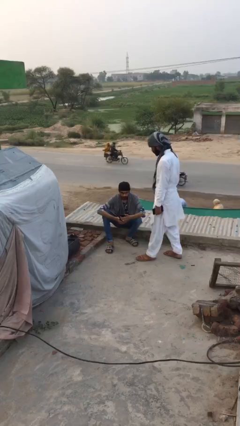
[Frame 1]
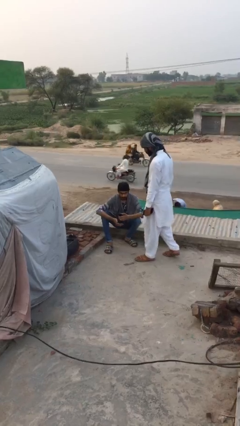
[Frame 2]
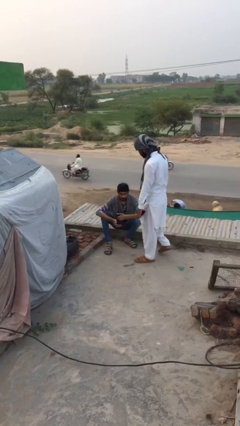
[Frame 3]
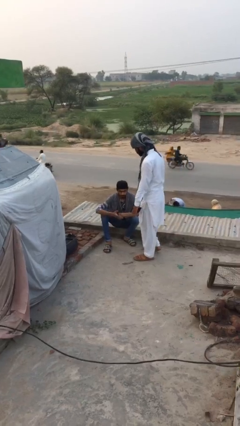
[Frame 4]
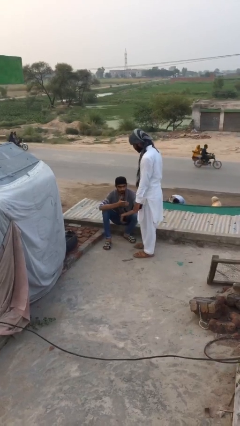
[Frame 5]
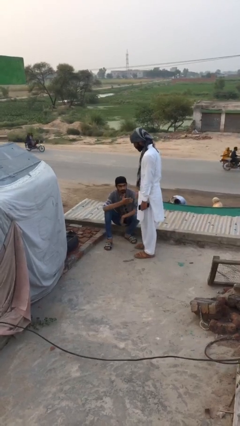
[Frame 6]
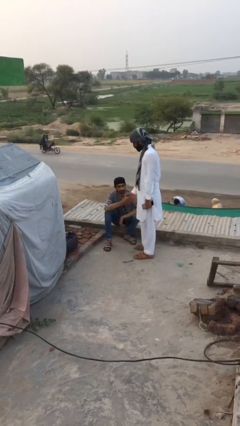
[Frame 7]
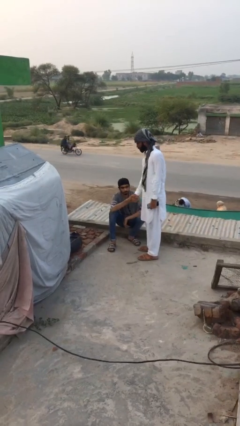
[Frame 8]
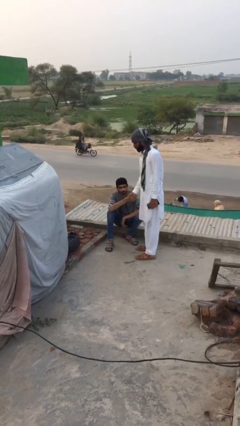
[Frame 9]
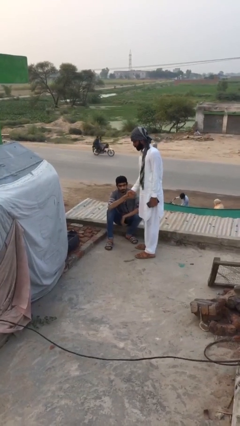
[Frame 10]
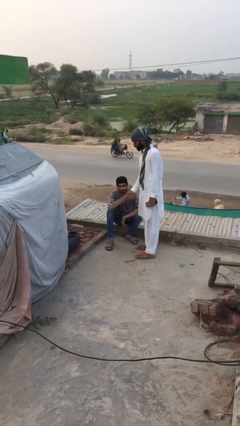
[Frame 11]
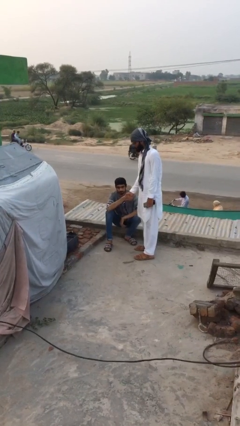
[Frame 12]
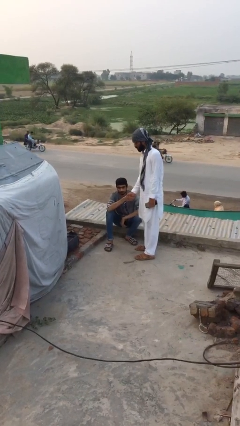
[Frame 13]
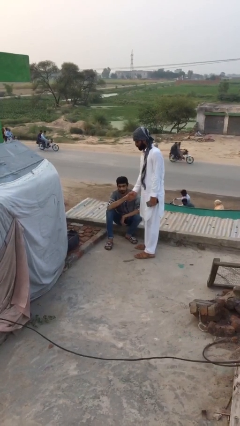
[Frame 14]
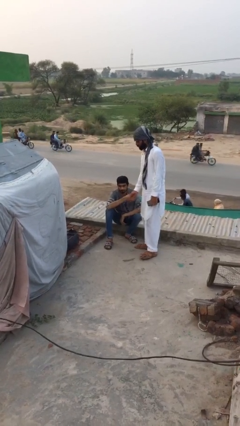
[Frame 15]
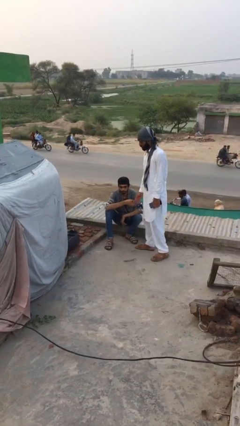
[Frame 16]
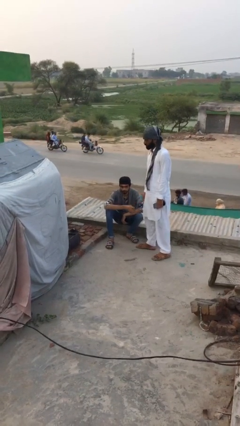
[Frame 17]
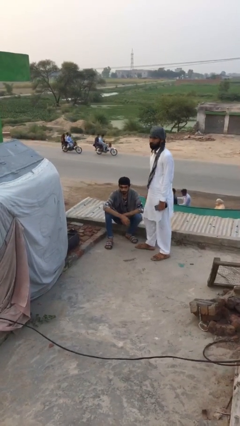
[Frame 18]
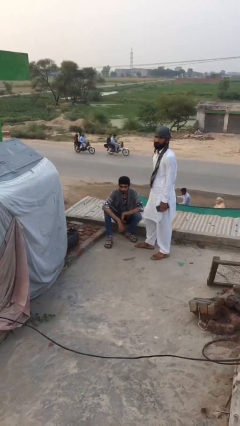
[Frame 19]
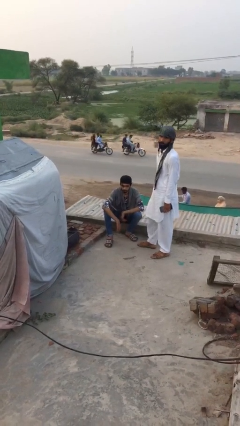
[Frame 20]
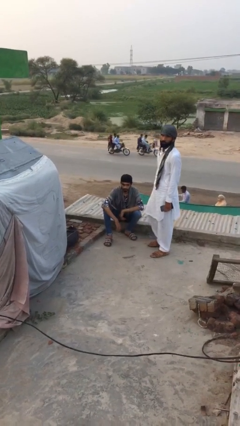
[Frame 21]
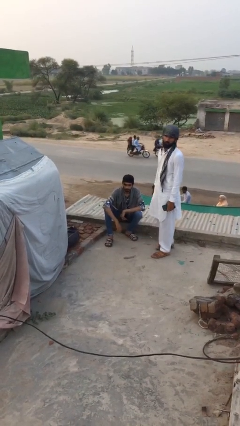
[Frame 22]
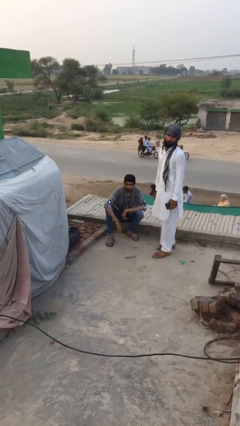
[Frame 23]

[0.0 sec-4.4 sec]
person shakes hand

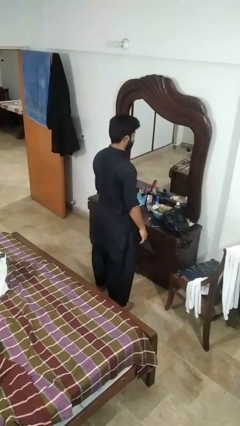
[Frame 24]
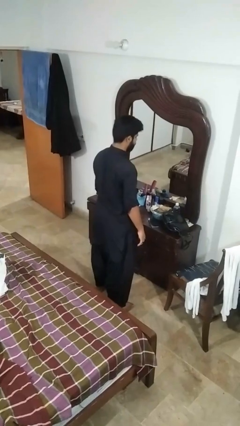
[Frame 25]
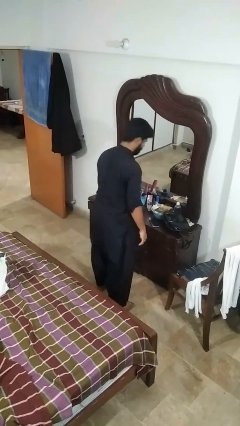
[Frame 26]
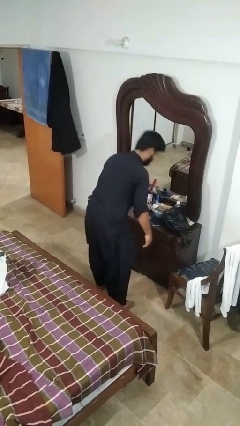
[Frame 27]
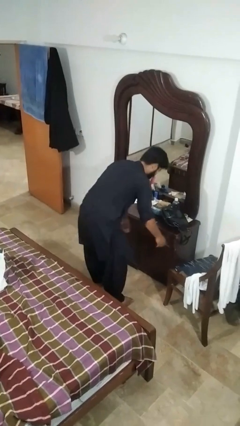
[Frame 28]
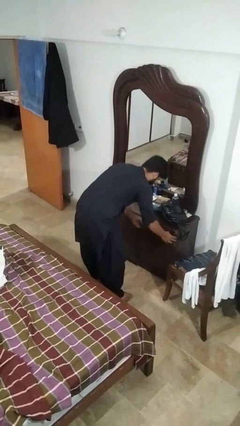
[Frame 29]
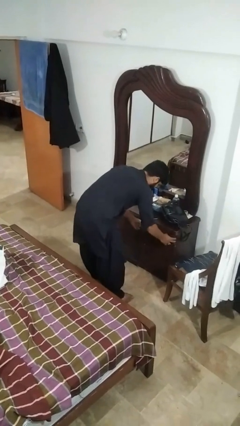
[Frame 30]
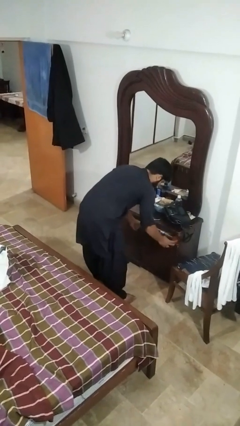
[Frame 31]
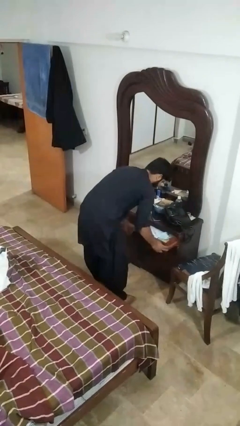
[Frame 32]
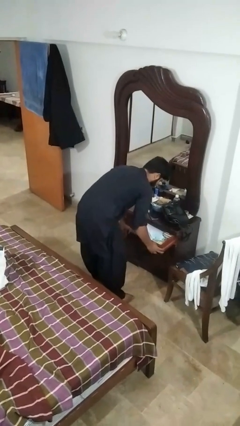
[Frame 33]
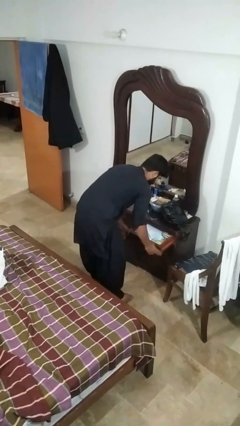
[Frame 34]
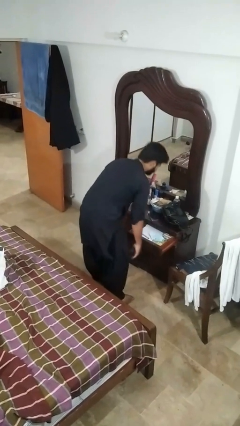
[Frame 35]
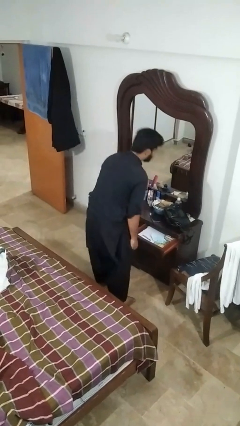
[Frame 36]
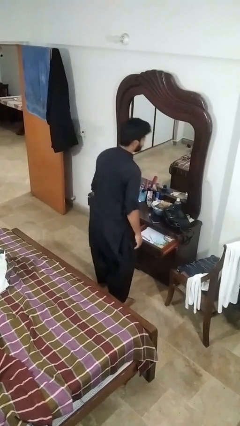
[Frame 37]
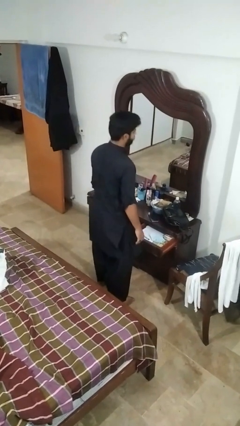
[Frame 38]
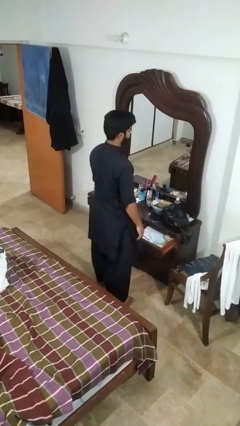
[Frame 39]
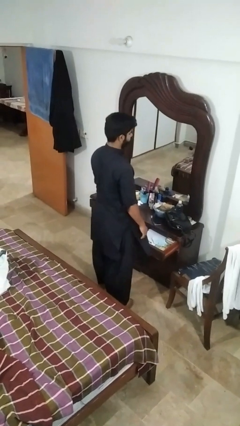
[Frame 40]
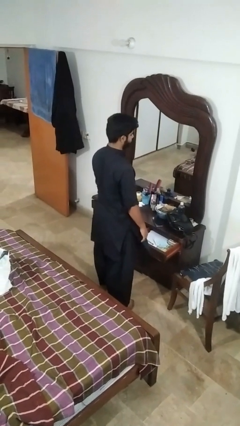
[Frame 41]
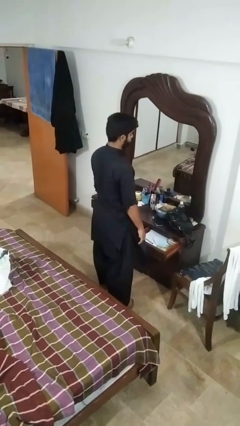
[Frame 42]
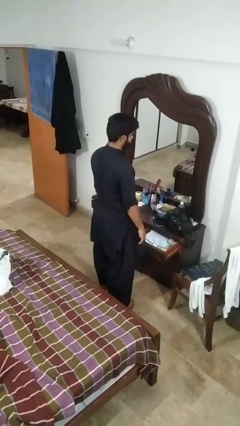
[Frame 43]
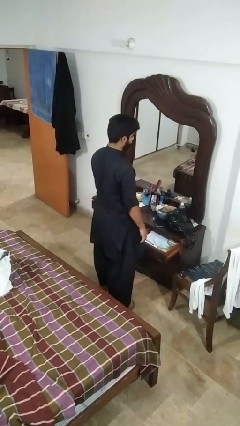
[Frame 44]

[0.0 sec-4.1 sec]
person opens dresser drawer

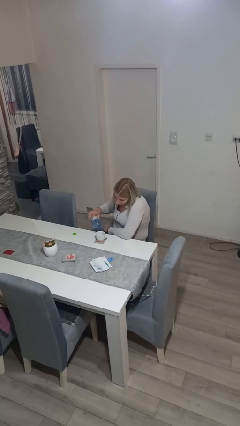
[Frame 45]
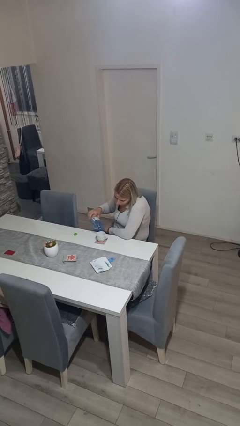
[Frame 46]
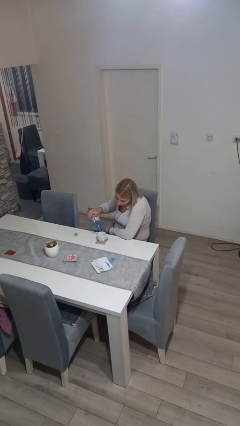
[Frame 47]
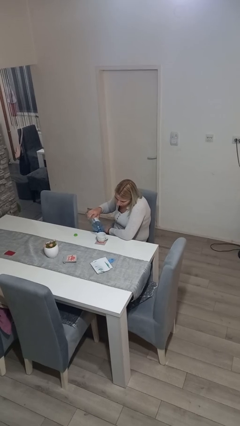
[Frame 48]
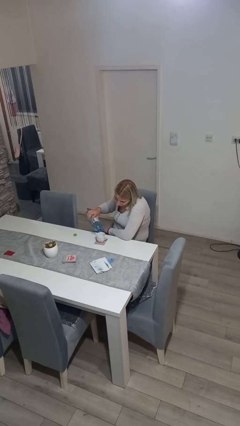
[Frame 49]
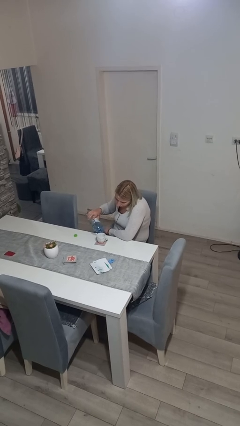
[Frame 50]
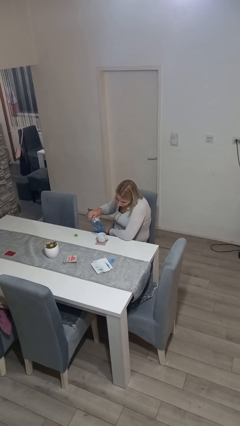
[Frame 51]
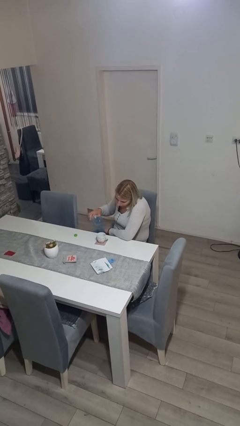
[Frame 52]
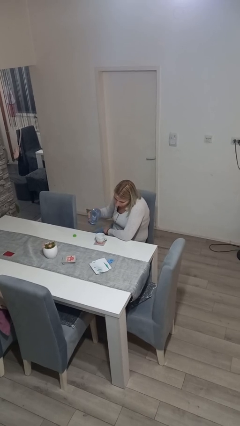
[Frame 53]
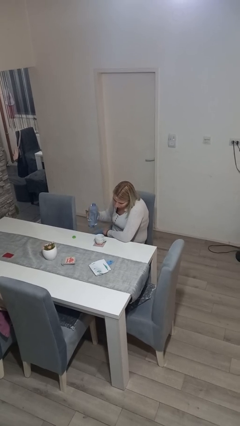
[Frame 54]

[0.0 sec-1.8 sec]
person pours liquid into cup

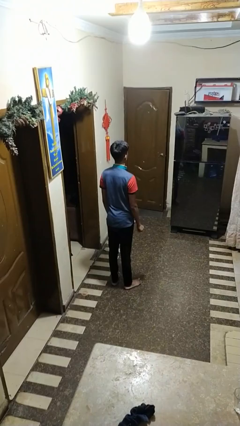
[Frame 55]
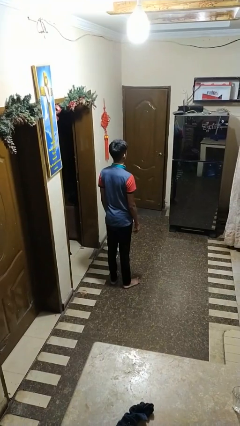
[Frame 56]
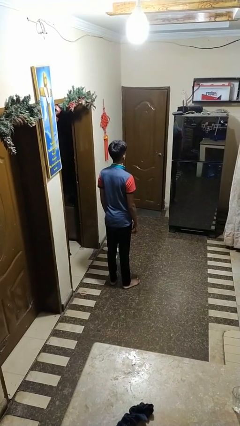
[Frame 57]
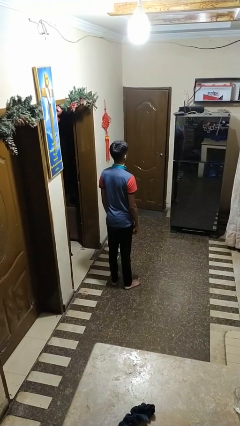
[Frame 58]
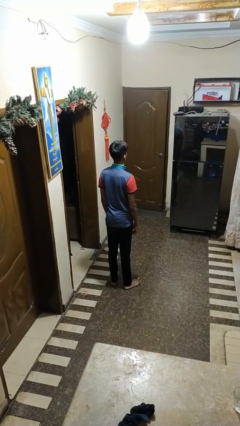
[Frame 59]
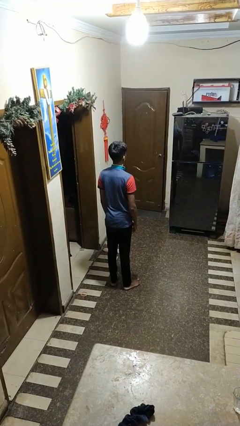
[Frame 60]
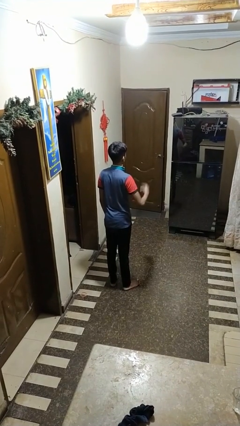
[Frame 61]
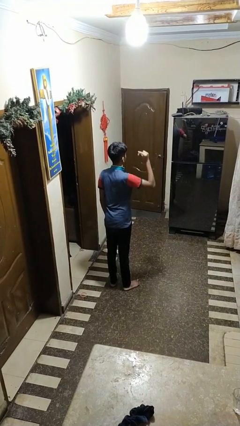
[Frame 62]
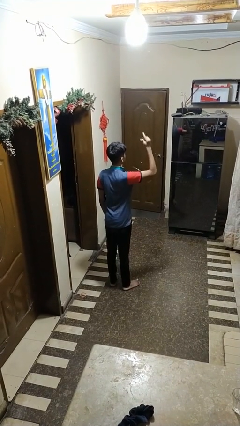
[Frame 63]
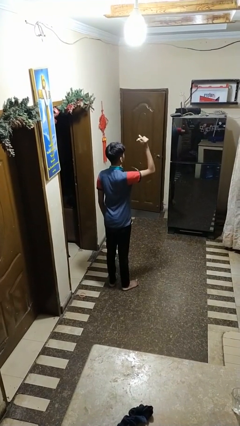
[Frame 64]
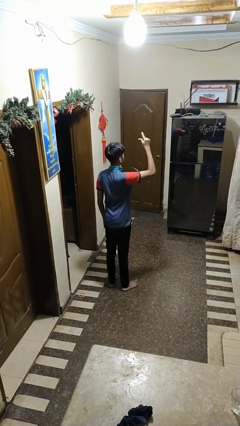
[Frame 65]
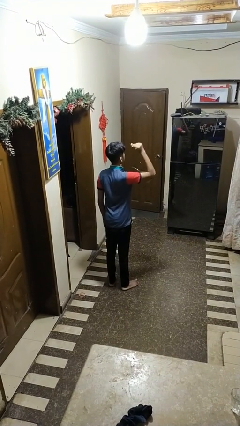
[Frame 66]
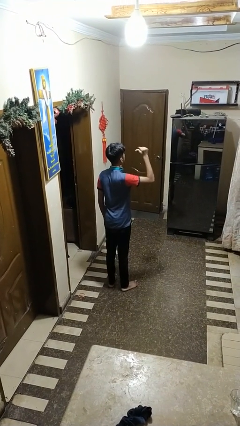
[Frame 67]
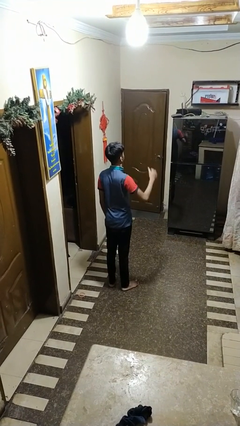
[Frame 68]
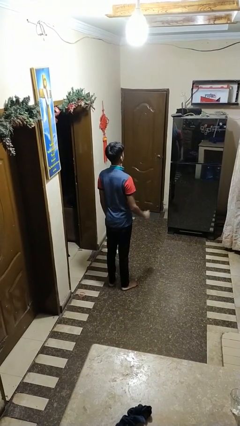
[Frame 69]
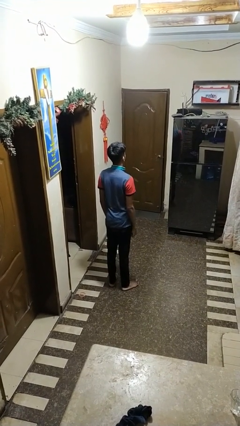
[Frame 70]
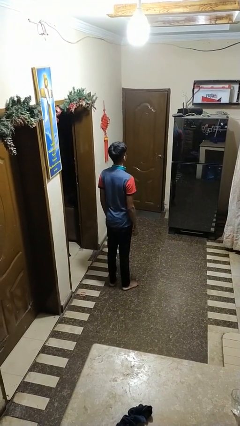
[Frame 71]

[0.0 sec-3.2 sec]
person snaps fingers

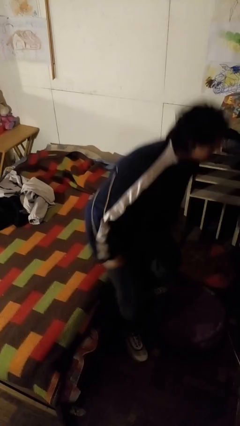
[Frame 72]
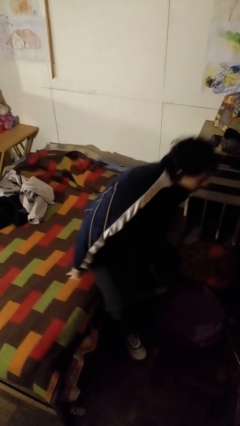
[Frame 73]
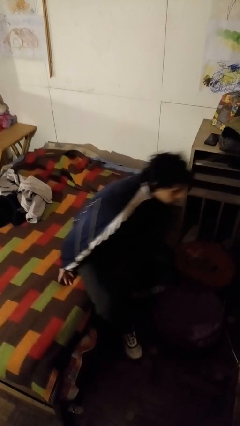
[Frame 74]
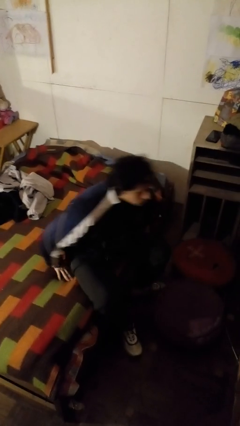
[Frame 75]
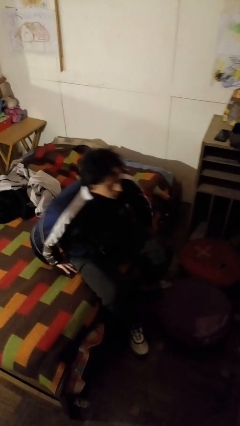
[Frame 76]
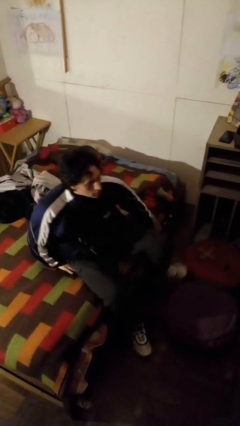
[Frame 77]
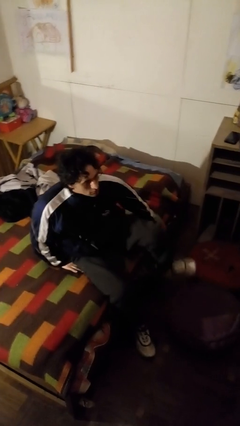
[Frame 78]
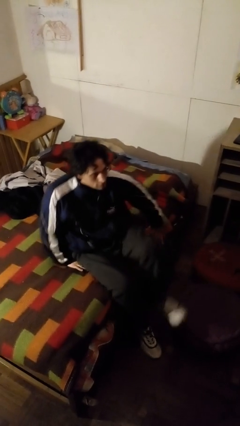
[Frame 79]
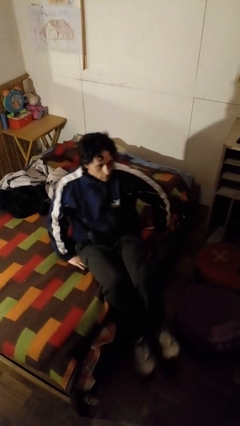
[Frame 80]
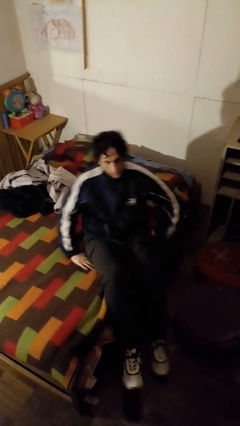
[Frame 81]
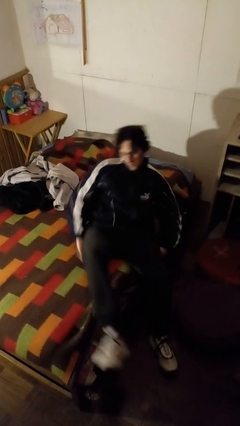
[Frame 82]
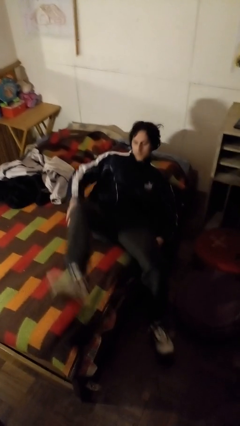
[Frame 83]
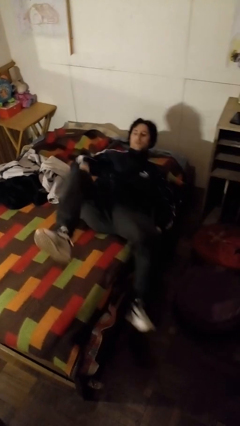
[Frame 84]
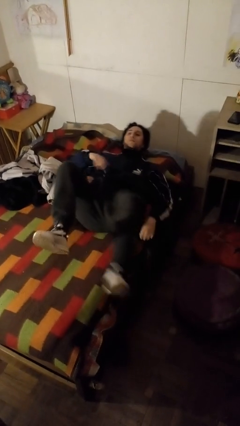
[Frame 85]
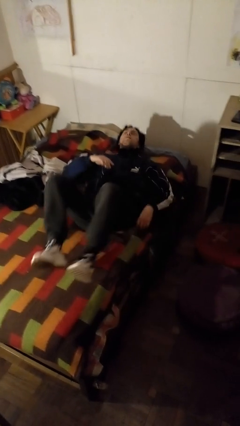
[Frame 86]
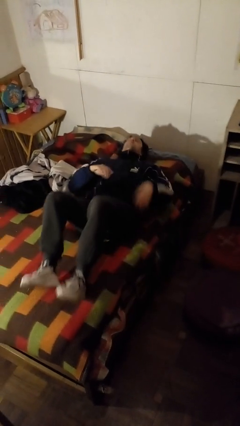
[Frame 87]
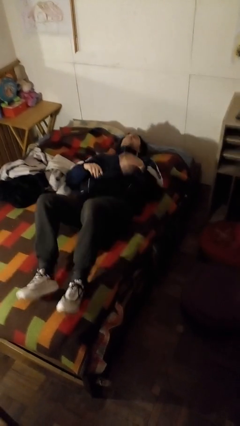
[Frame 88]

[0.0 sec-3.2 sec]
person lies down on bed

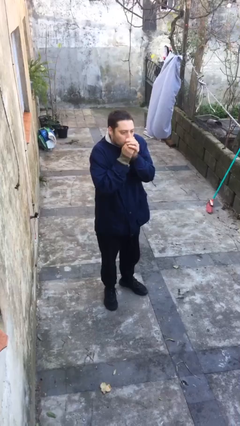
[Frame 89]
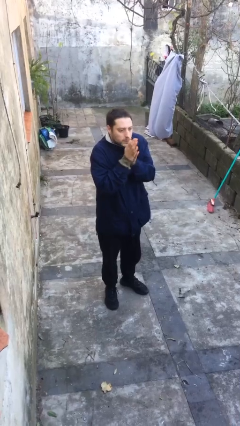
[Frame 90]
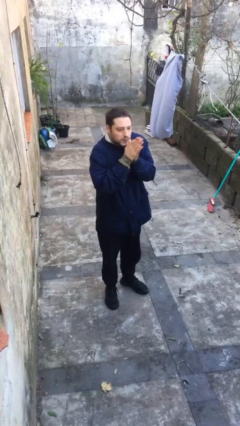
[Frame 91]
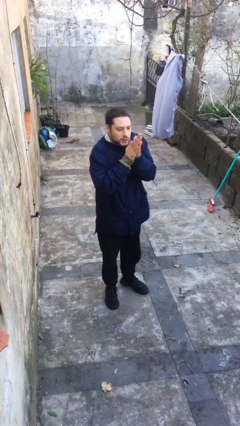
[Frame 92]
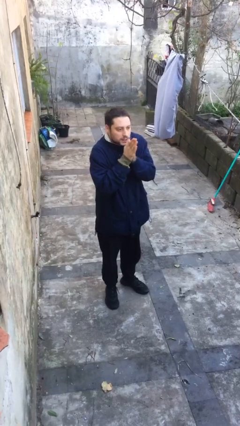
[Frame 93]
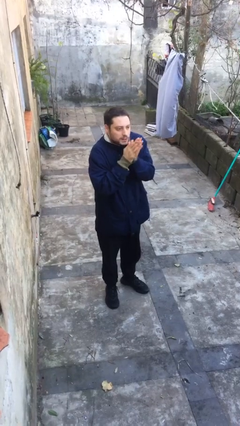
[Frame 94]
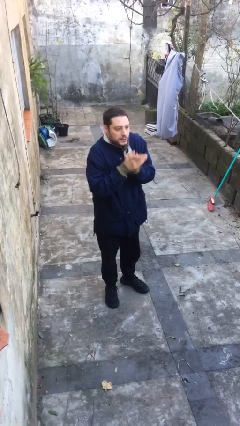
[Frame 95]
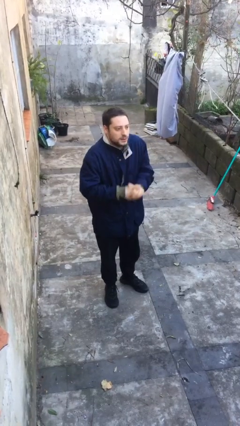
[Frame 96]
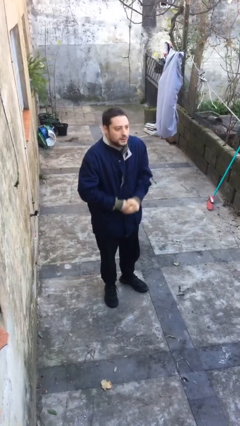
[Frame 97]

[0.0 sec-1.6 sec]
person blows into hands
